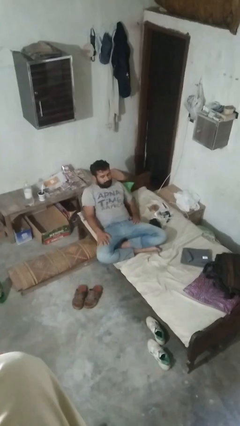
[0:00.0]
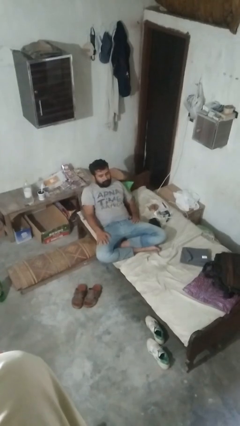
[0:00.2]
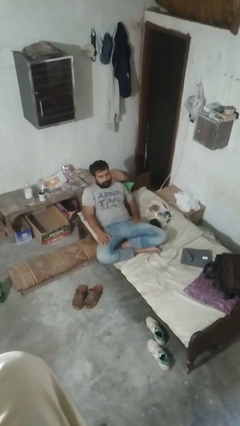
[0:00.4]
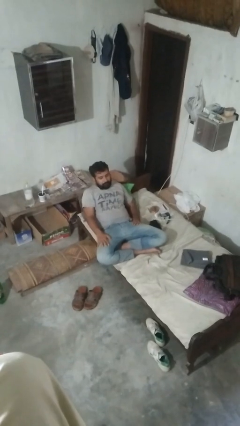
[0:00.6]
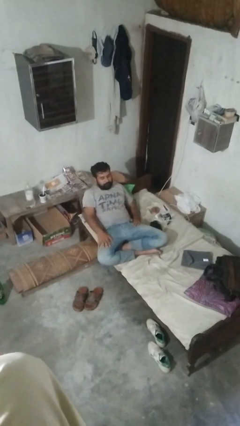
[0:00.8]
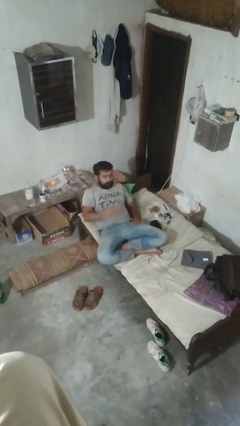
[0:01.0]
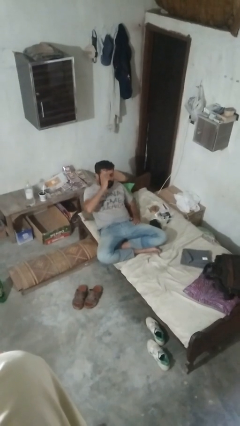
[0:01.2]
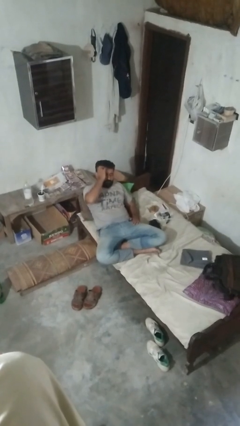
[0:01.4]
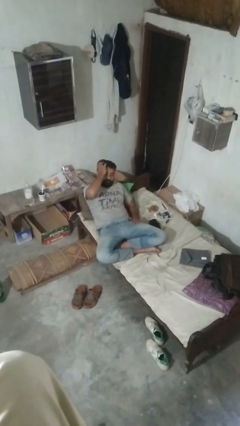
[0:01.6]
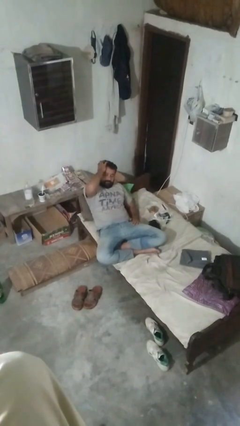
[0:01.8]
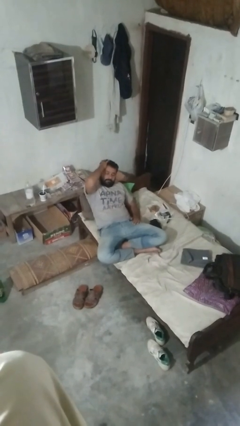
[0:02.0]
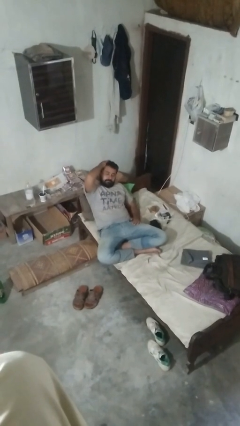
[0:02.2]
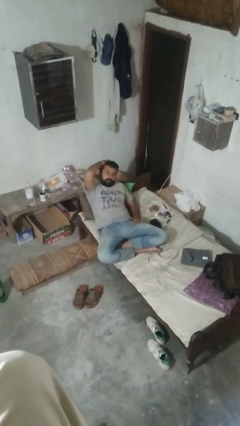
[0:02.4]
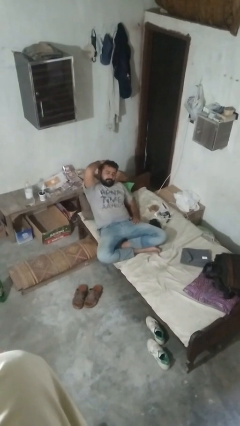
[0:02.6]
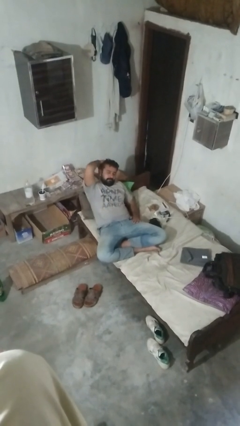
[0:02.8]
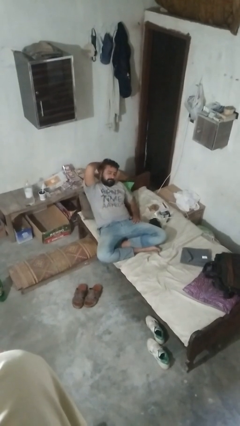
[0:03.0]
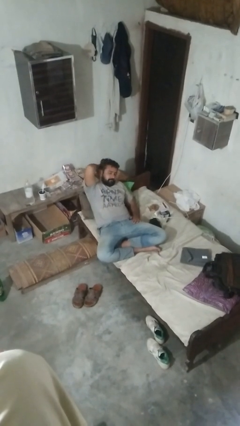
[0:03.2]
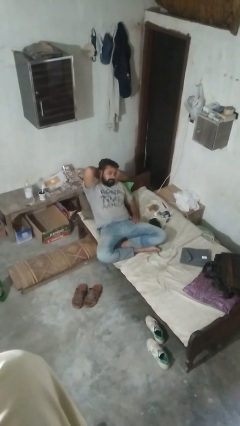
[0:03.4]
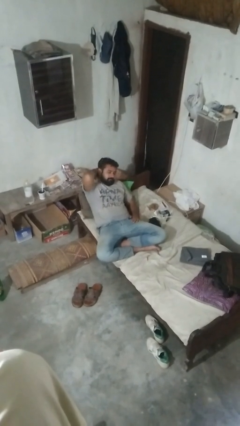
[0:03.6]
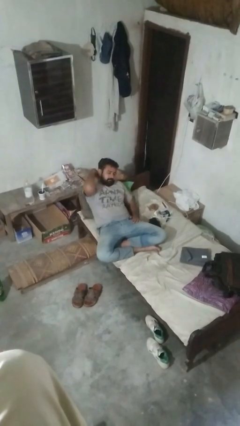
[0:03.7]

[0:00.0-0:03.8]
person strokes hair

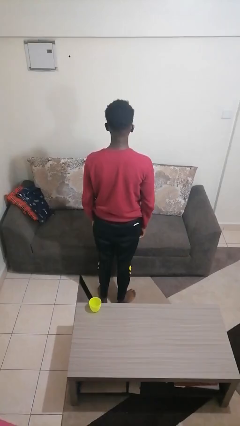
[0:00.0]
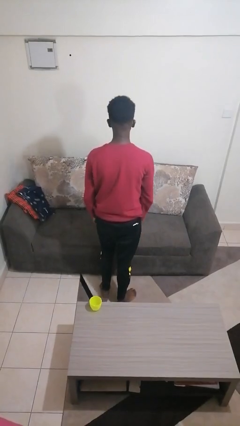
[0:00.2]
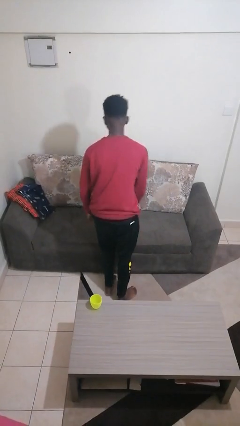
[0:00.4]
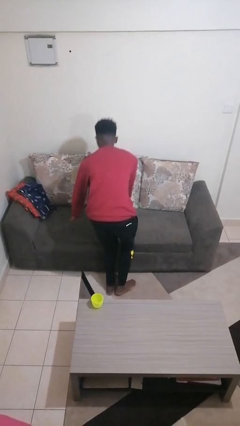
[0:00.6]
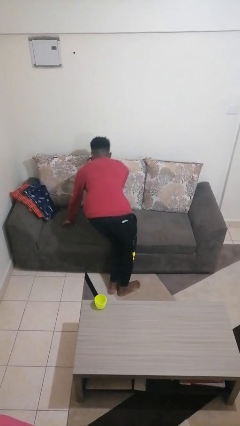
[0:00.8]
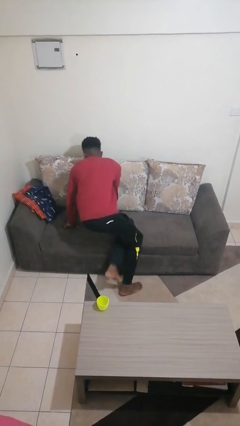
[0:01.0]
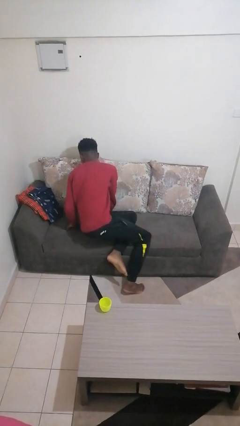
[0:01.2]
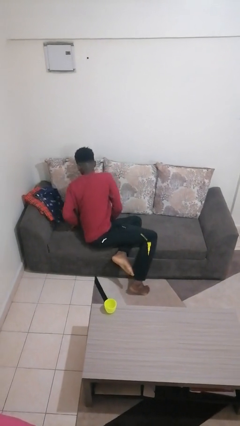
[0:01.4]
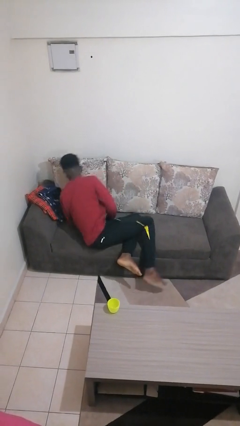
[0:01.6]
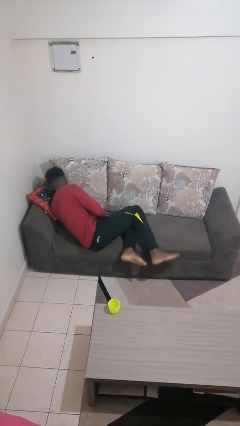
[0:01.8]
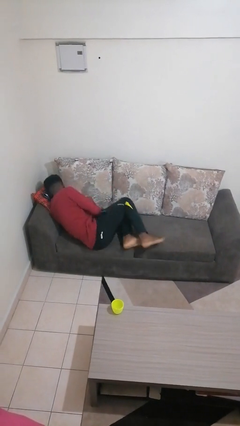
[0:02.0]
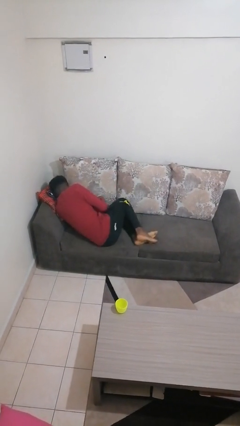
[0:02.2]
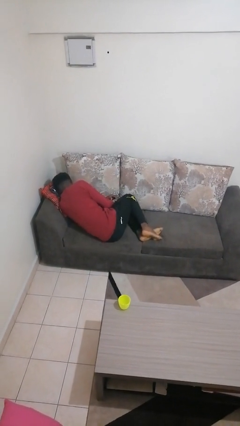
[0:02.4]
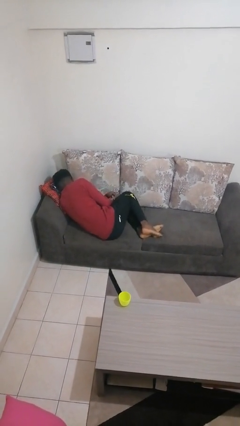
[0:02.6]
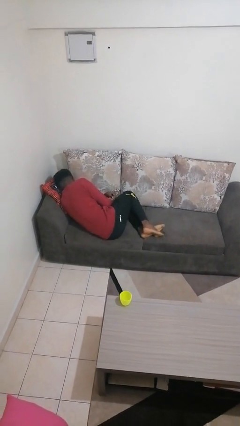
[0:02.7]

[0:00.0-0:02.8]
person lies down on couch

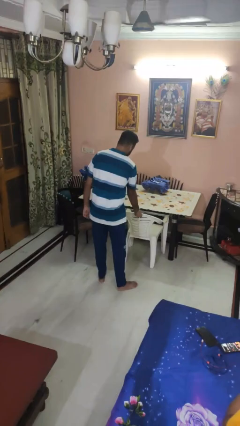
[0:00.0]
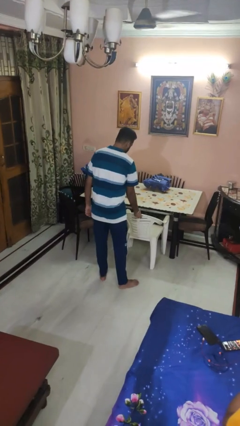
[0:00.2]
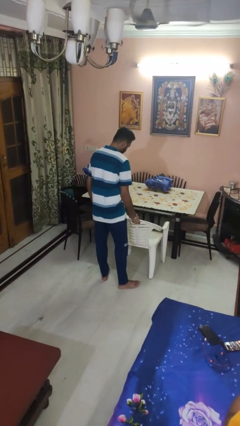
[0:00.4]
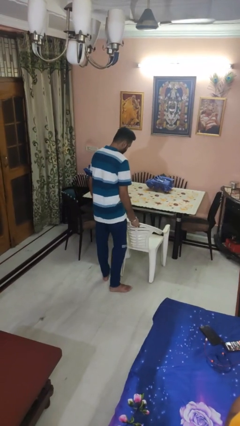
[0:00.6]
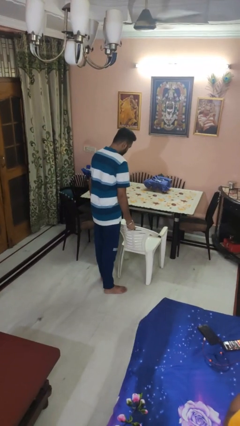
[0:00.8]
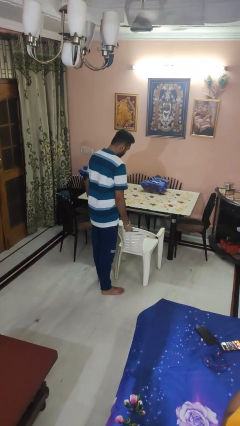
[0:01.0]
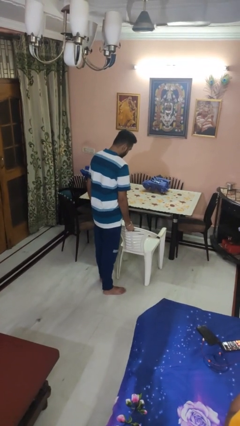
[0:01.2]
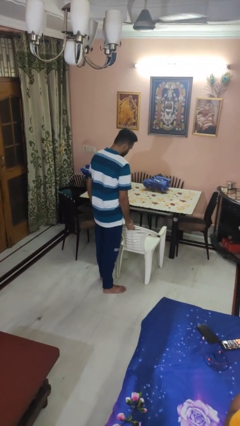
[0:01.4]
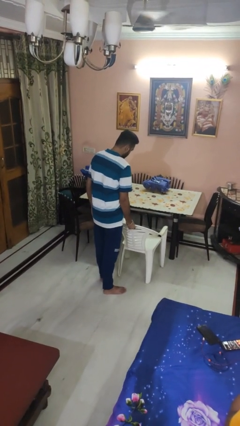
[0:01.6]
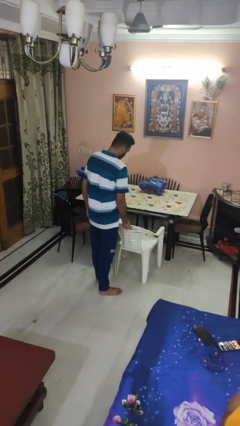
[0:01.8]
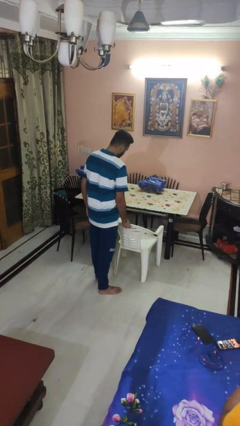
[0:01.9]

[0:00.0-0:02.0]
person pulls out chair

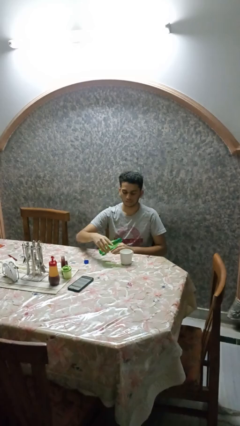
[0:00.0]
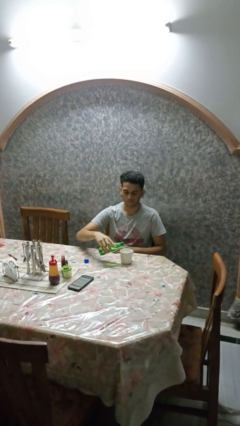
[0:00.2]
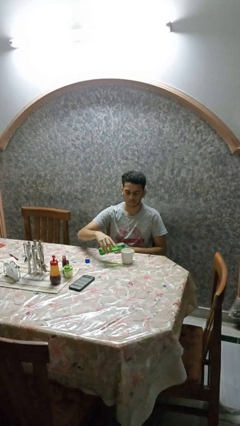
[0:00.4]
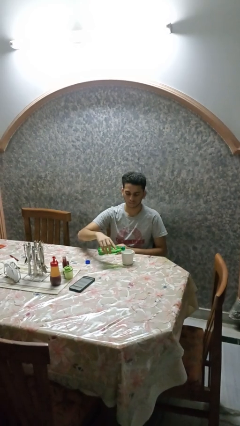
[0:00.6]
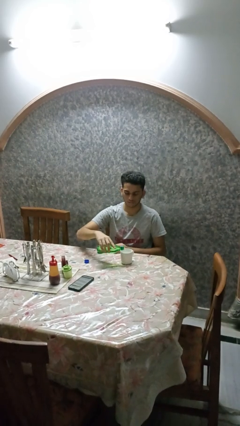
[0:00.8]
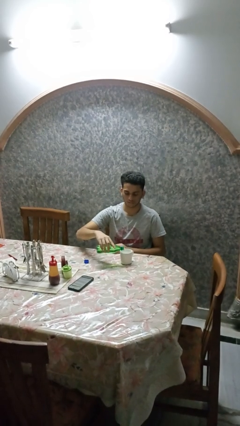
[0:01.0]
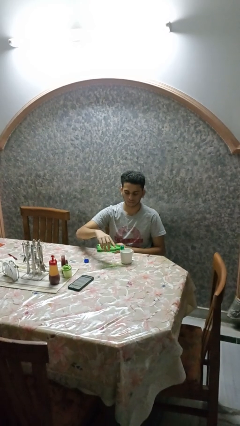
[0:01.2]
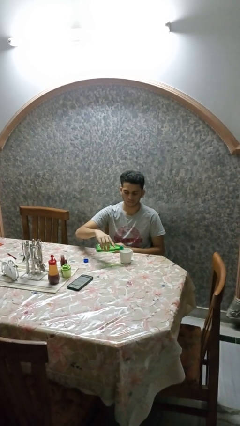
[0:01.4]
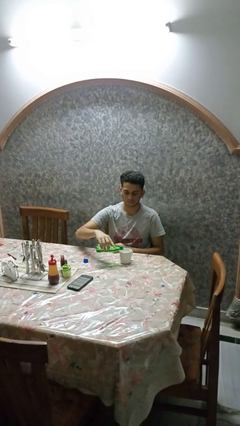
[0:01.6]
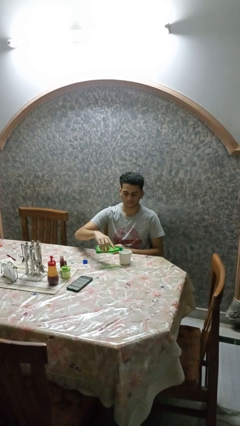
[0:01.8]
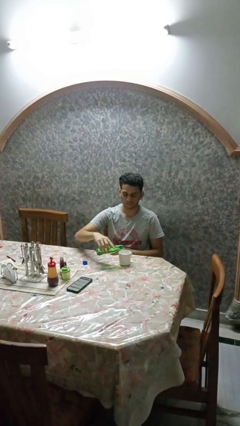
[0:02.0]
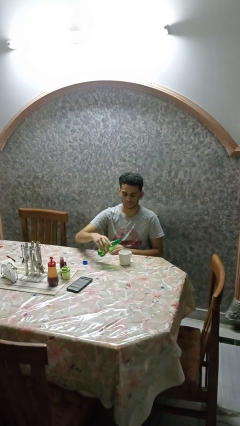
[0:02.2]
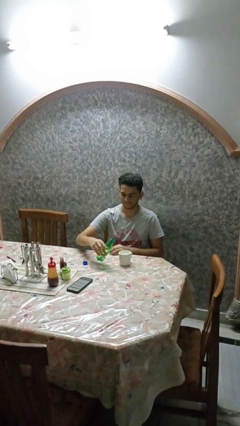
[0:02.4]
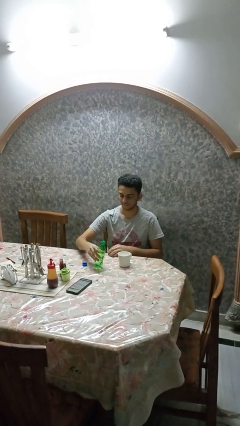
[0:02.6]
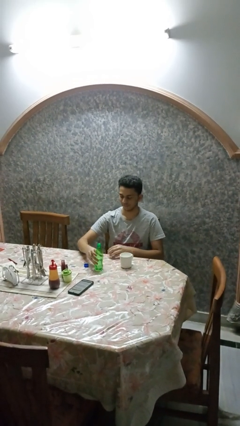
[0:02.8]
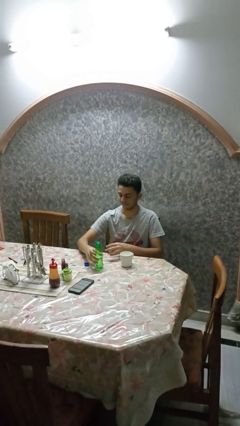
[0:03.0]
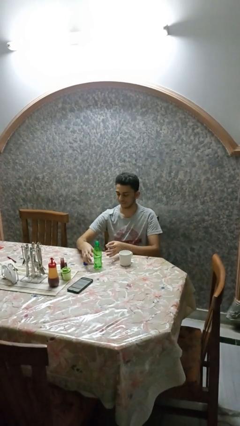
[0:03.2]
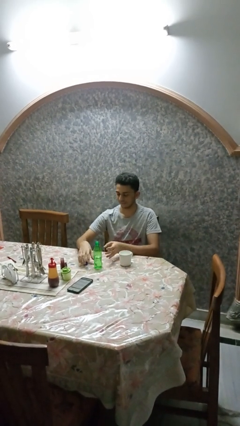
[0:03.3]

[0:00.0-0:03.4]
person pours liquid into cup

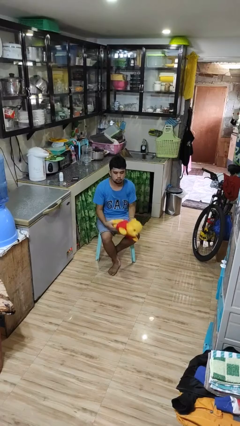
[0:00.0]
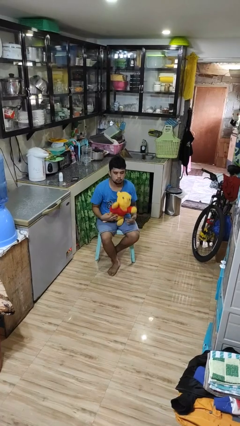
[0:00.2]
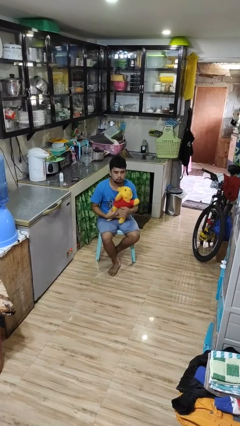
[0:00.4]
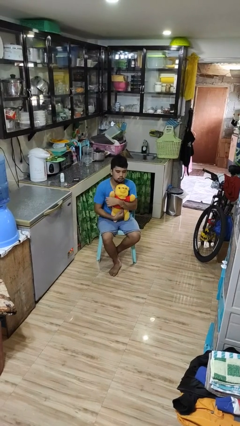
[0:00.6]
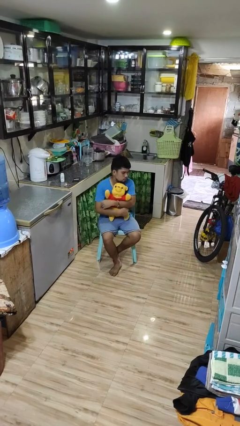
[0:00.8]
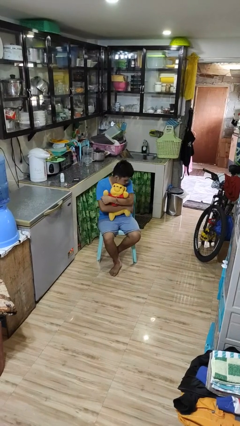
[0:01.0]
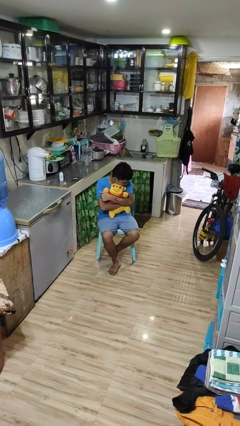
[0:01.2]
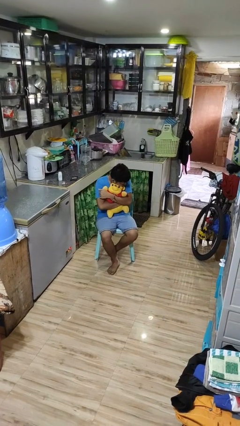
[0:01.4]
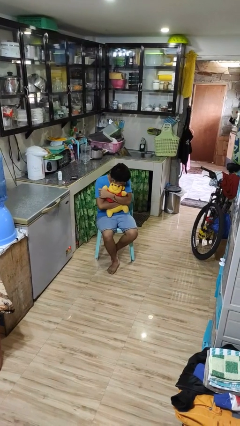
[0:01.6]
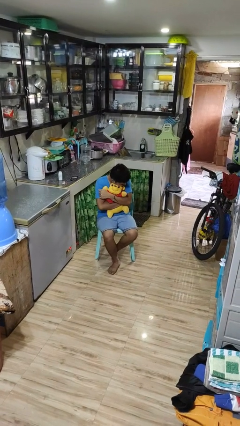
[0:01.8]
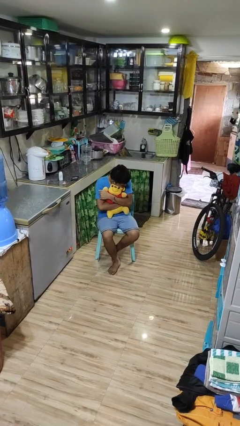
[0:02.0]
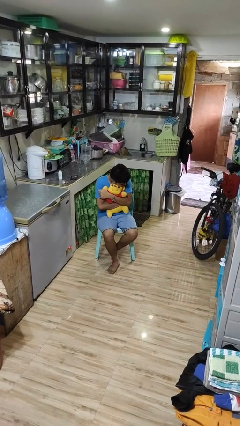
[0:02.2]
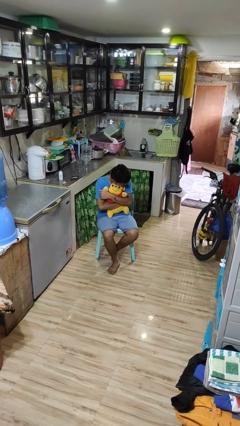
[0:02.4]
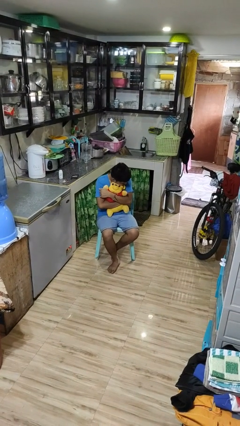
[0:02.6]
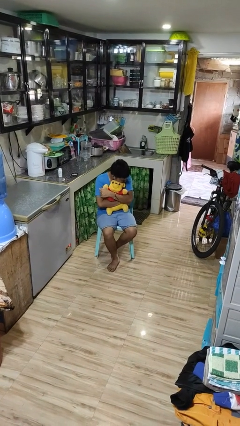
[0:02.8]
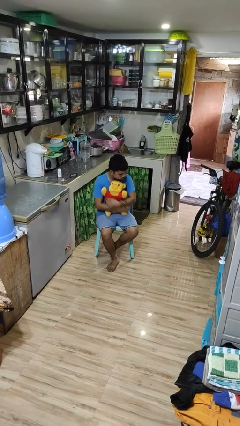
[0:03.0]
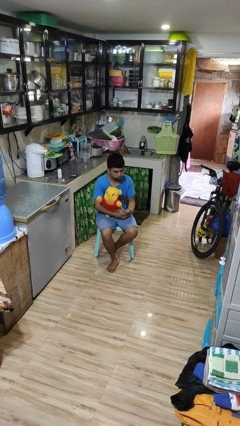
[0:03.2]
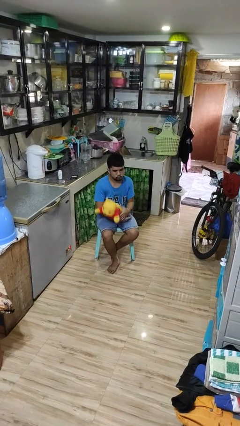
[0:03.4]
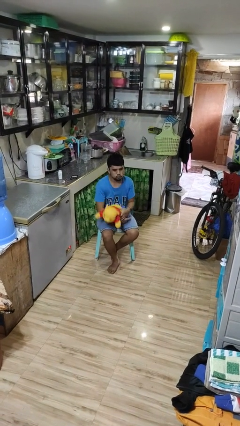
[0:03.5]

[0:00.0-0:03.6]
person hugs stuffed animal

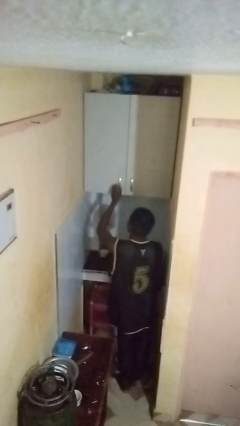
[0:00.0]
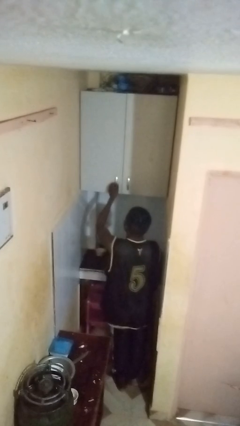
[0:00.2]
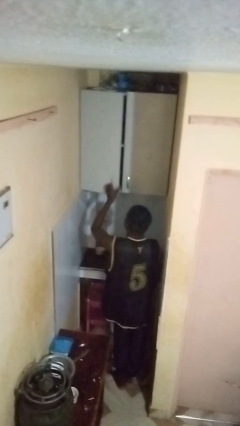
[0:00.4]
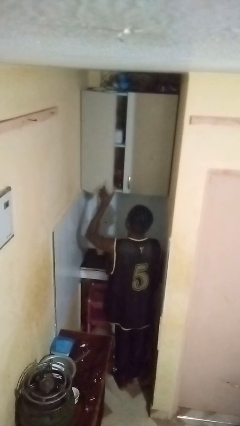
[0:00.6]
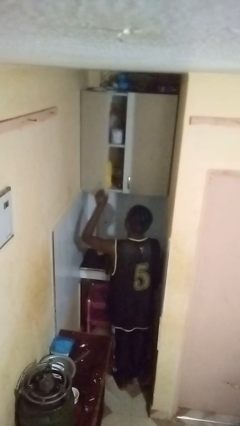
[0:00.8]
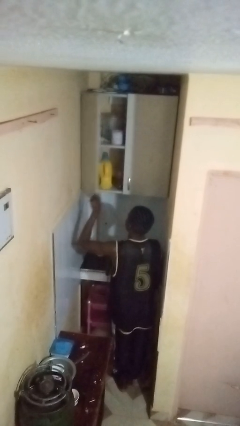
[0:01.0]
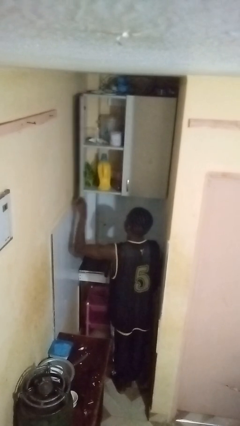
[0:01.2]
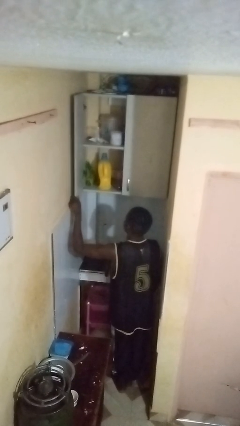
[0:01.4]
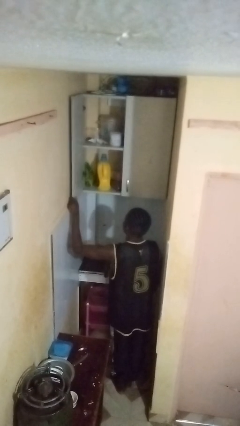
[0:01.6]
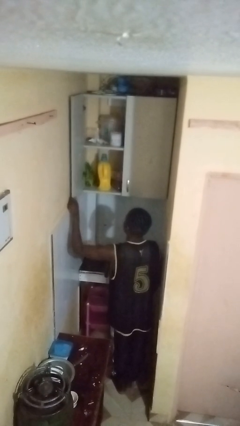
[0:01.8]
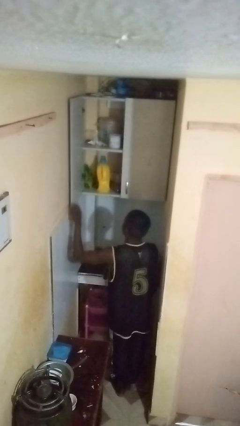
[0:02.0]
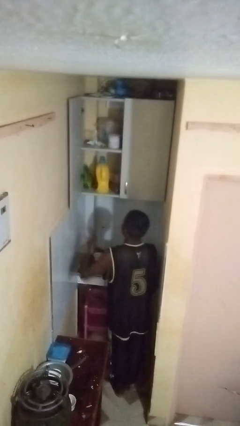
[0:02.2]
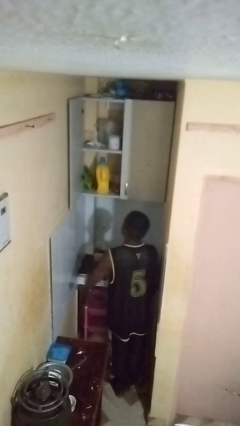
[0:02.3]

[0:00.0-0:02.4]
person opens cabinet
